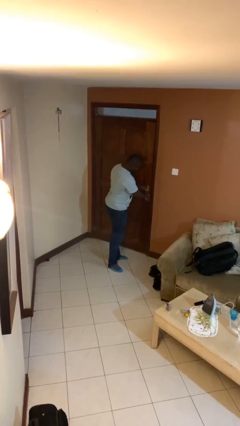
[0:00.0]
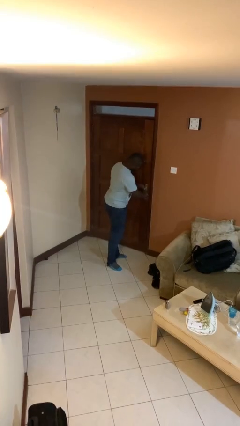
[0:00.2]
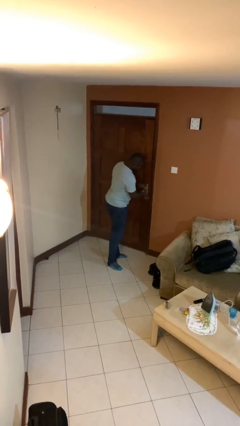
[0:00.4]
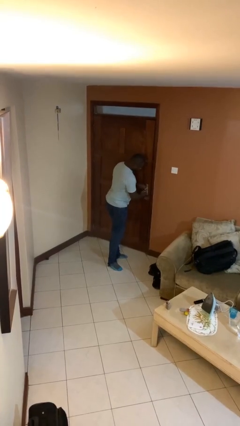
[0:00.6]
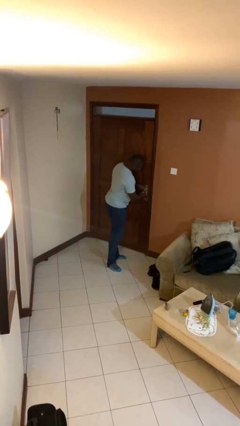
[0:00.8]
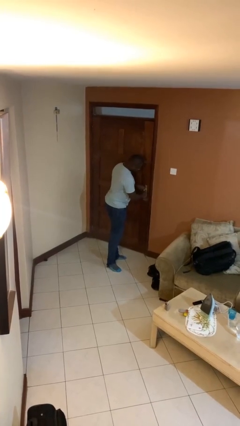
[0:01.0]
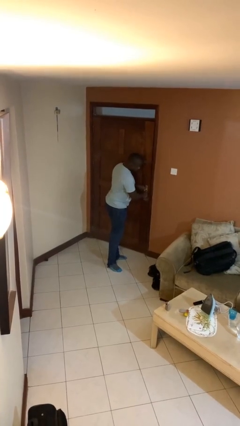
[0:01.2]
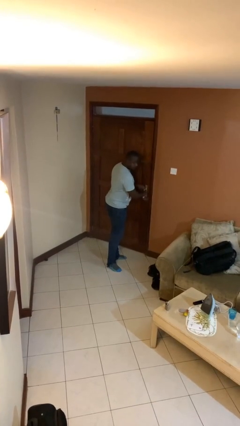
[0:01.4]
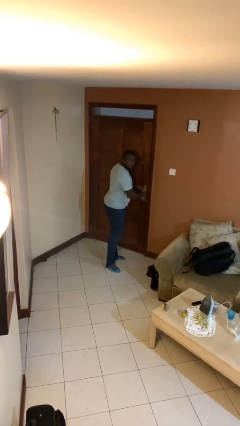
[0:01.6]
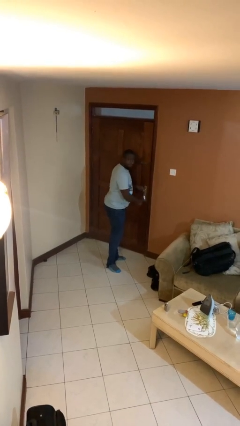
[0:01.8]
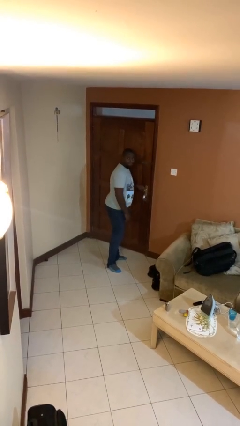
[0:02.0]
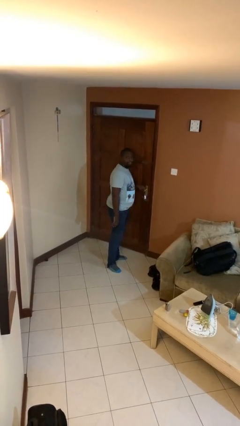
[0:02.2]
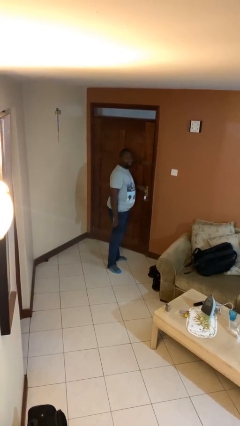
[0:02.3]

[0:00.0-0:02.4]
person locks door with keys

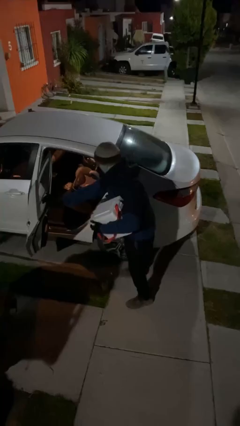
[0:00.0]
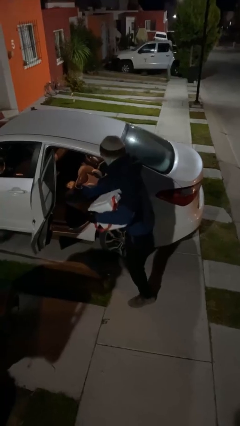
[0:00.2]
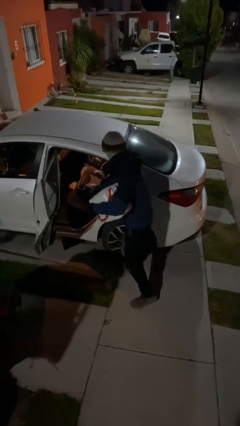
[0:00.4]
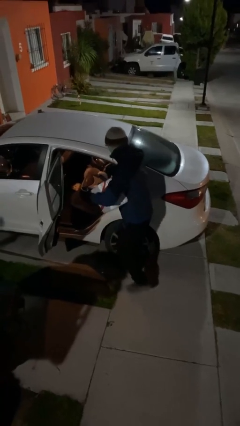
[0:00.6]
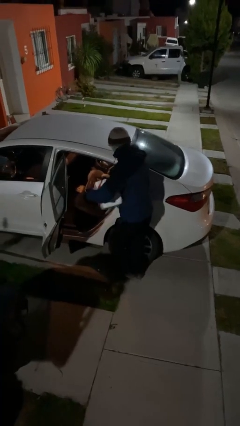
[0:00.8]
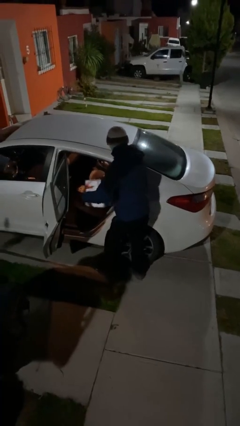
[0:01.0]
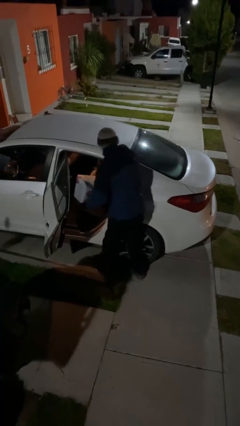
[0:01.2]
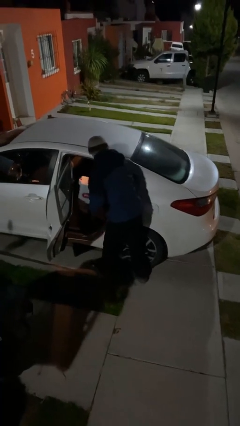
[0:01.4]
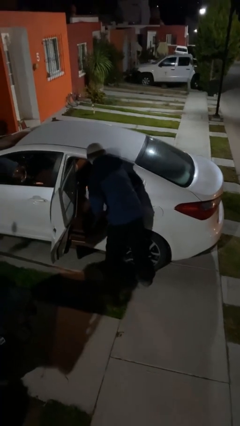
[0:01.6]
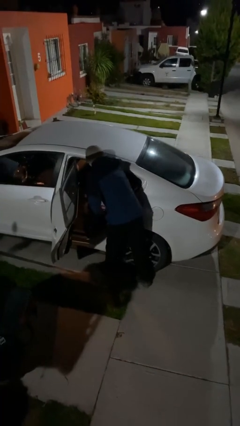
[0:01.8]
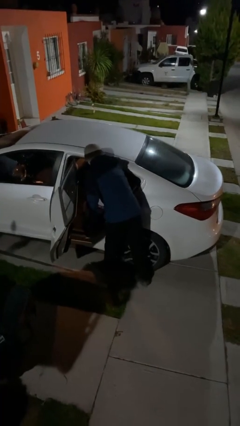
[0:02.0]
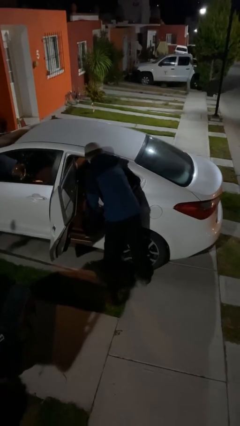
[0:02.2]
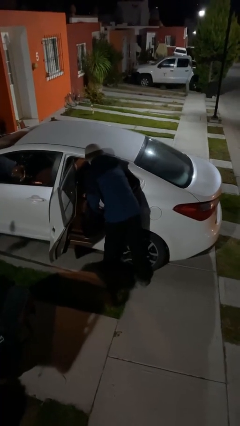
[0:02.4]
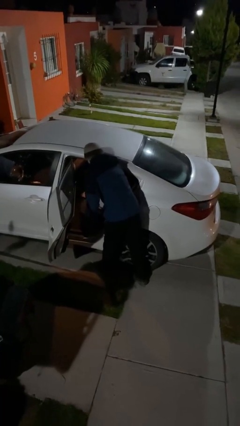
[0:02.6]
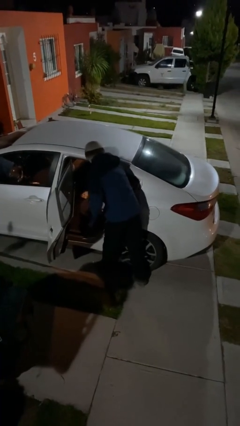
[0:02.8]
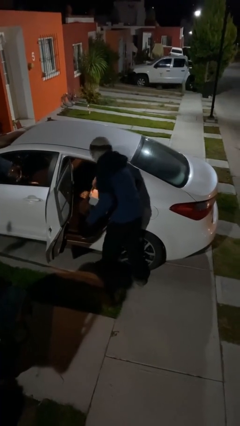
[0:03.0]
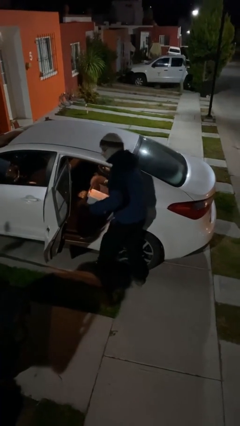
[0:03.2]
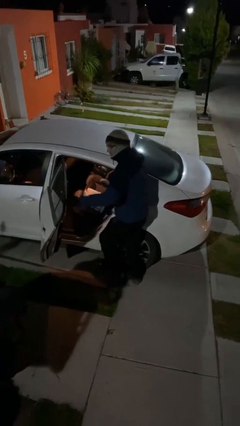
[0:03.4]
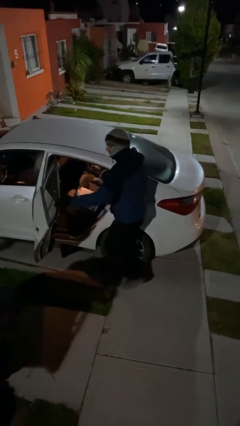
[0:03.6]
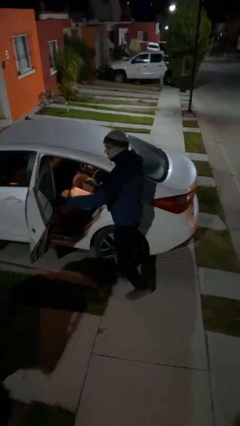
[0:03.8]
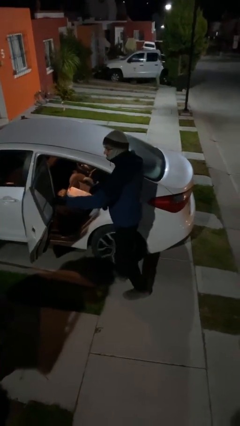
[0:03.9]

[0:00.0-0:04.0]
person loads car

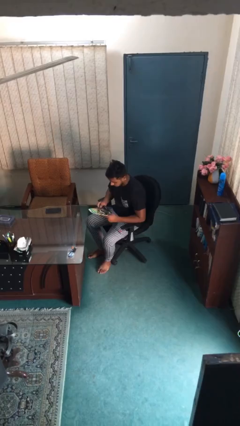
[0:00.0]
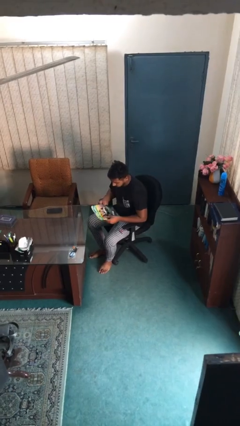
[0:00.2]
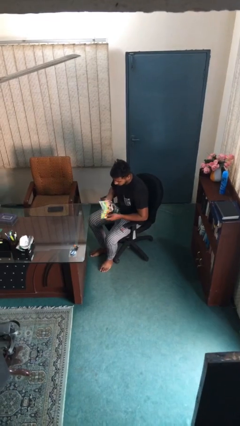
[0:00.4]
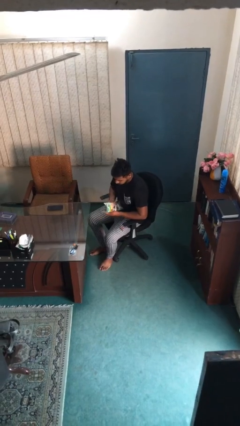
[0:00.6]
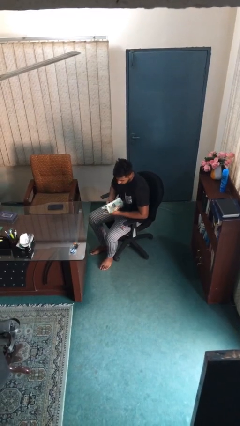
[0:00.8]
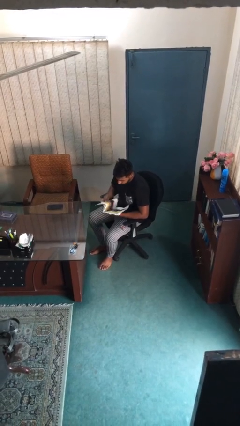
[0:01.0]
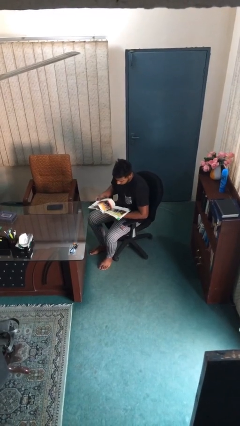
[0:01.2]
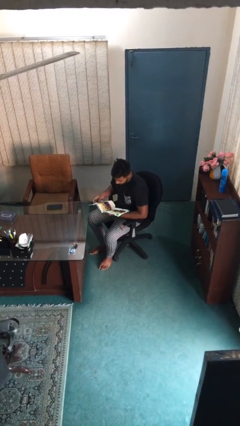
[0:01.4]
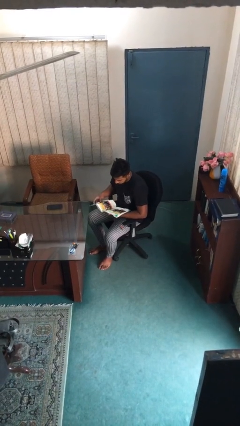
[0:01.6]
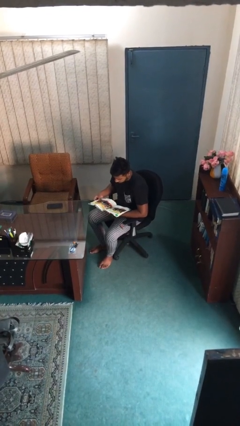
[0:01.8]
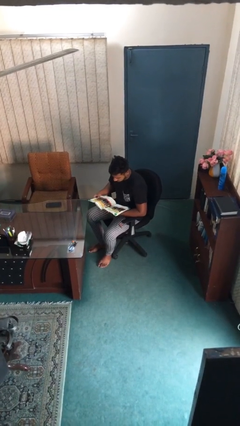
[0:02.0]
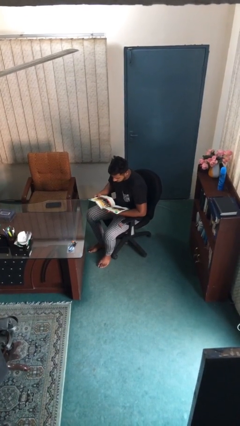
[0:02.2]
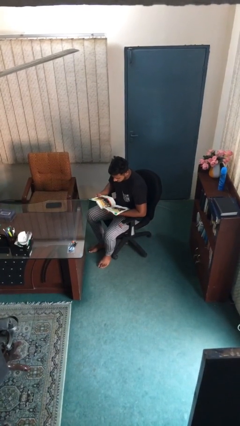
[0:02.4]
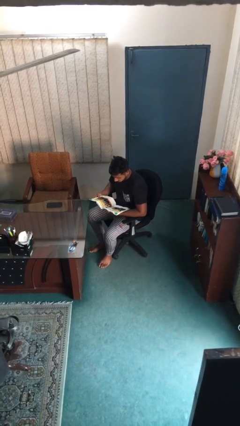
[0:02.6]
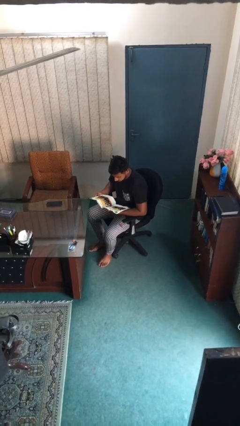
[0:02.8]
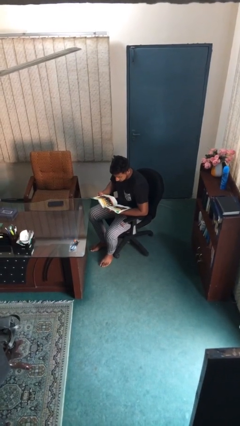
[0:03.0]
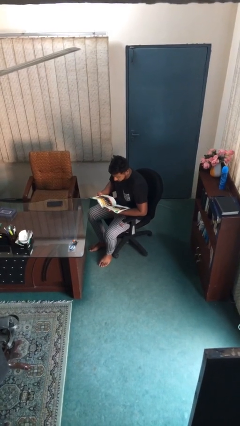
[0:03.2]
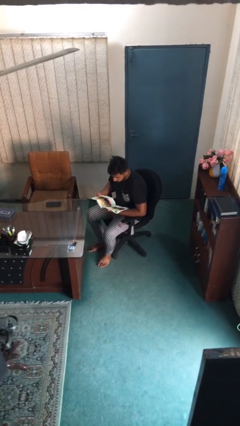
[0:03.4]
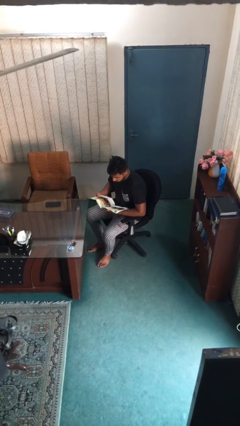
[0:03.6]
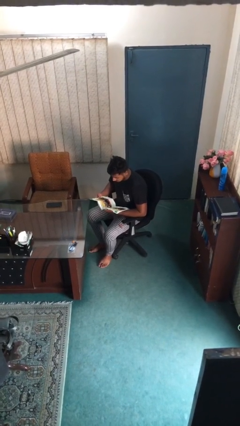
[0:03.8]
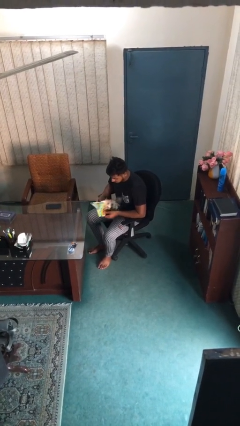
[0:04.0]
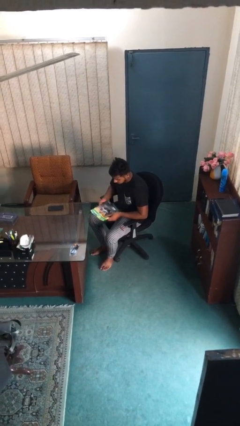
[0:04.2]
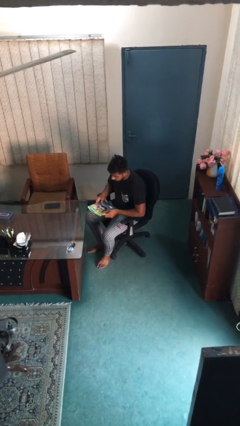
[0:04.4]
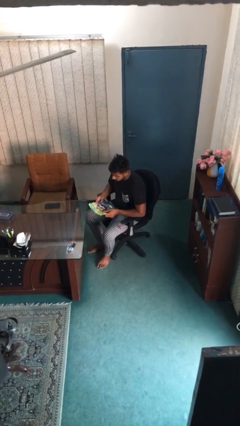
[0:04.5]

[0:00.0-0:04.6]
person reads document

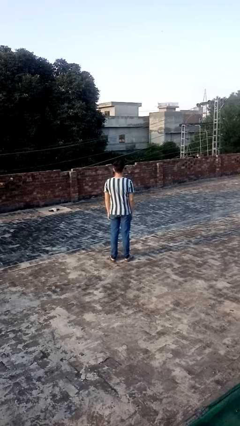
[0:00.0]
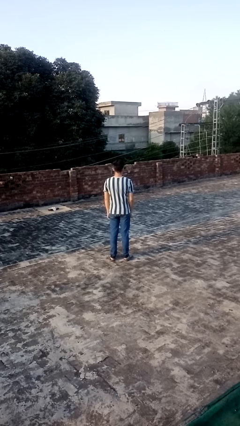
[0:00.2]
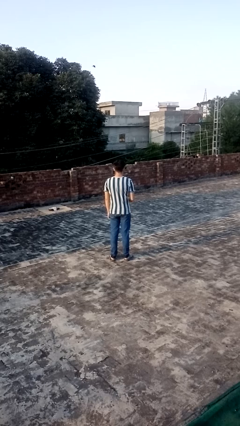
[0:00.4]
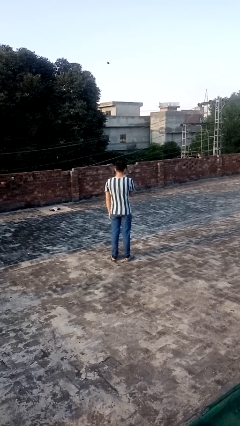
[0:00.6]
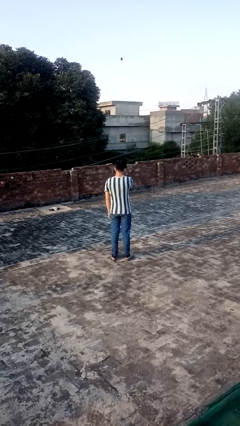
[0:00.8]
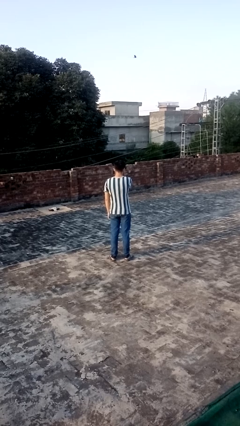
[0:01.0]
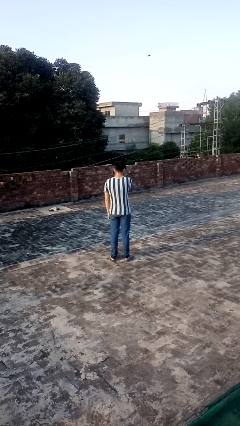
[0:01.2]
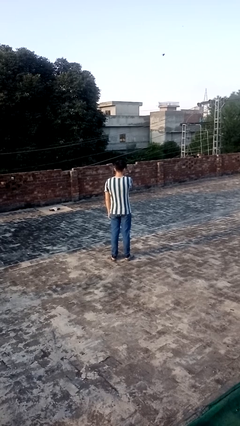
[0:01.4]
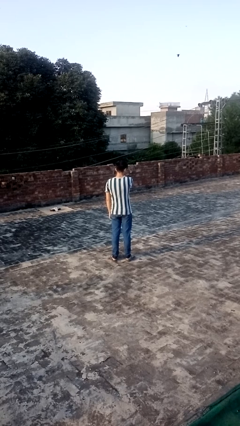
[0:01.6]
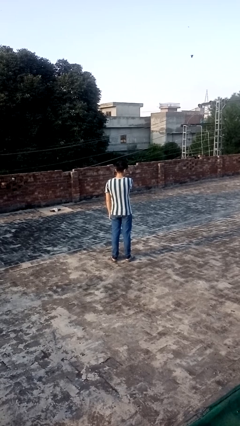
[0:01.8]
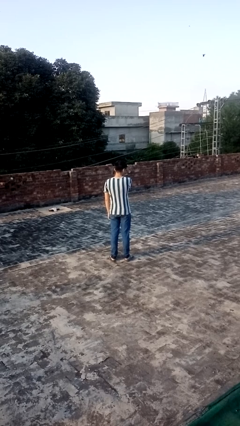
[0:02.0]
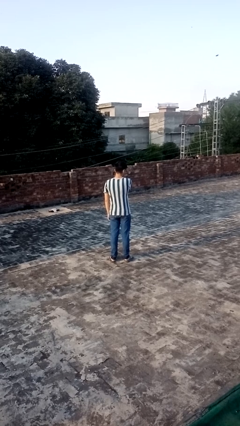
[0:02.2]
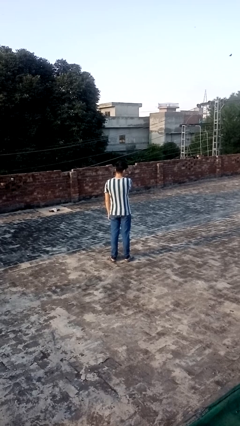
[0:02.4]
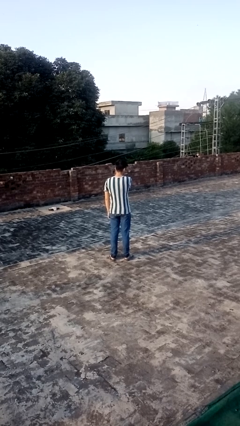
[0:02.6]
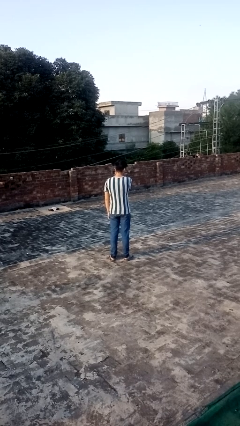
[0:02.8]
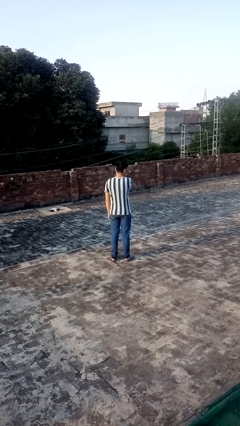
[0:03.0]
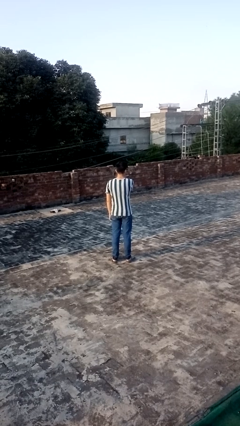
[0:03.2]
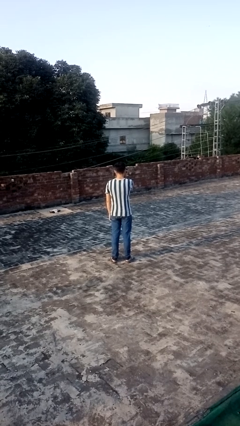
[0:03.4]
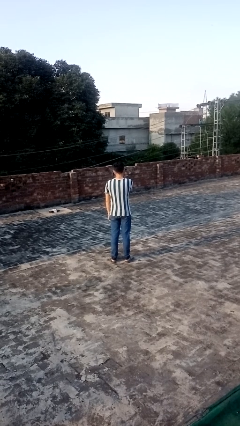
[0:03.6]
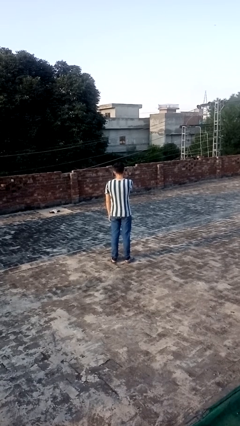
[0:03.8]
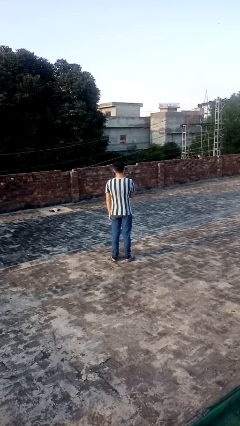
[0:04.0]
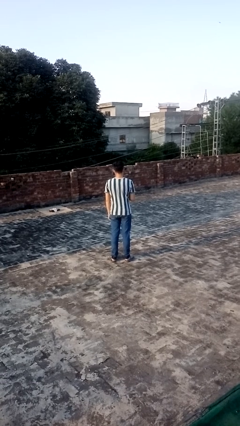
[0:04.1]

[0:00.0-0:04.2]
person scratches face

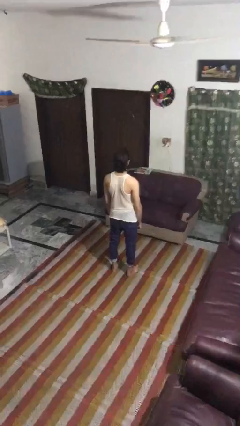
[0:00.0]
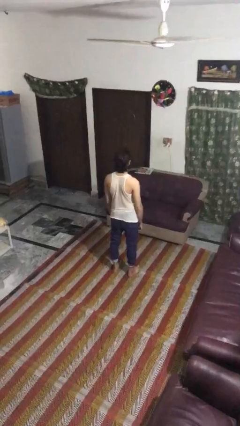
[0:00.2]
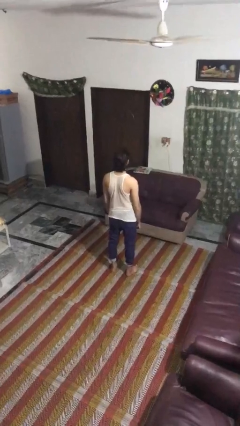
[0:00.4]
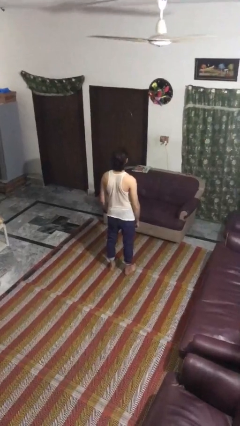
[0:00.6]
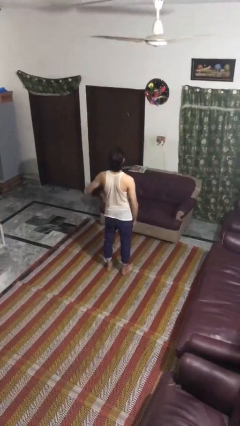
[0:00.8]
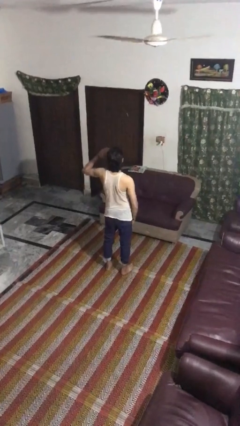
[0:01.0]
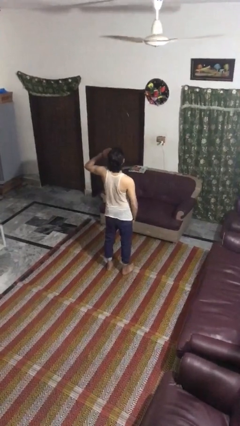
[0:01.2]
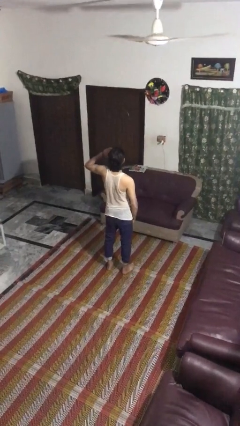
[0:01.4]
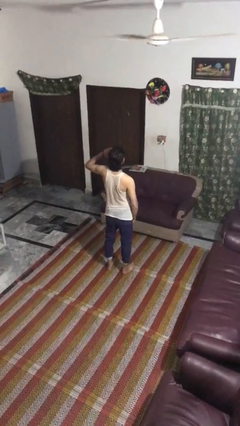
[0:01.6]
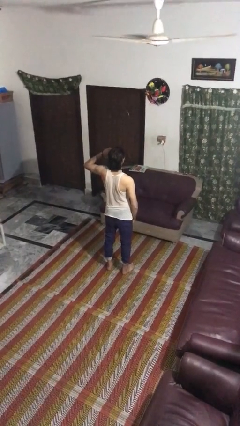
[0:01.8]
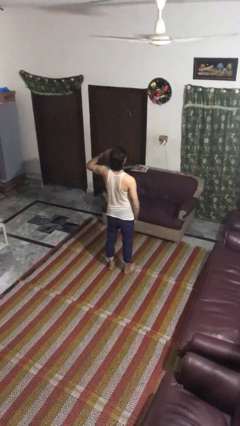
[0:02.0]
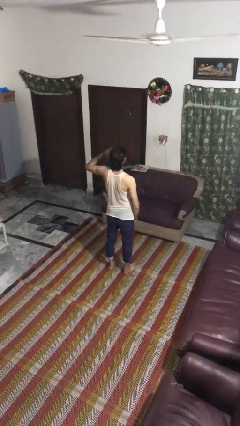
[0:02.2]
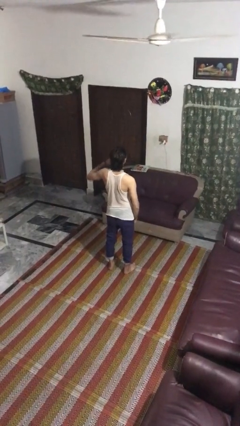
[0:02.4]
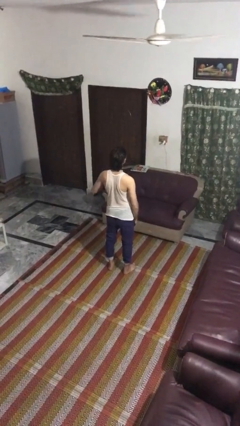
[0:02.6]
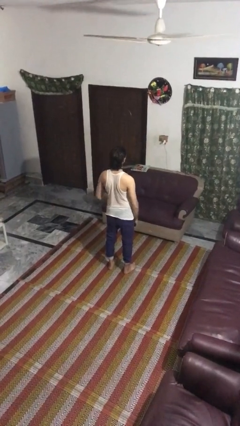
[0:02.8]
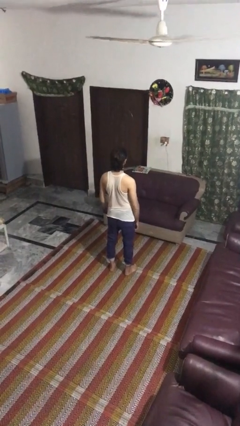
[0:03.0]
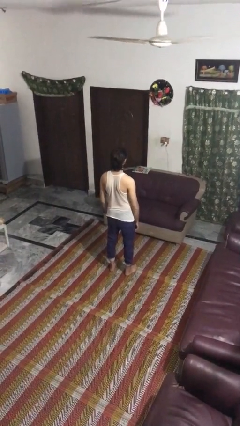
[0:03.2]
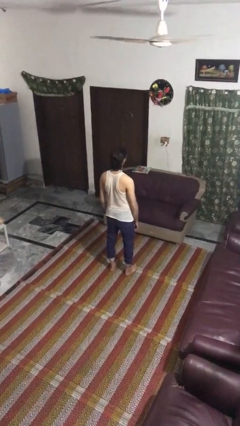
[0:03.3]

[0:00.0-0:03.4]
person salutes
